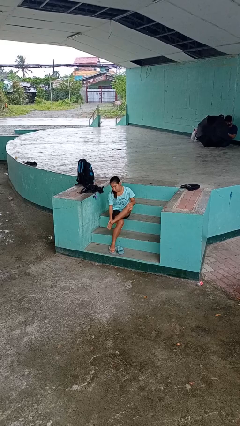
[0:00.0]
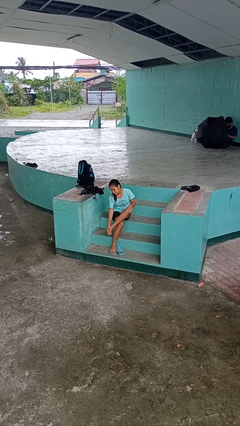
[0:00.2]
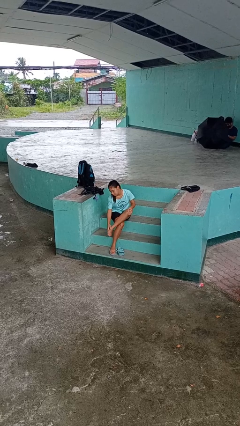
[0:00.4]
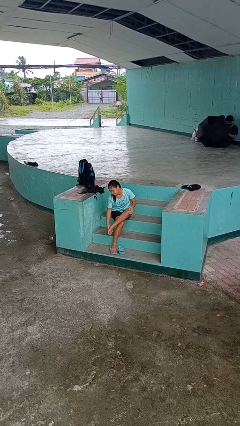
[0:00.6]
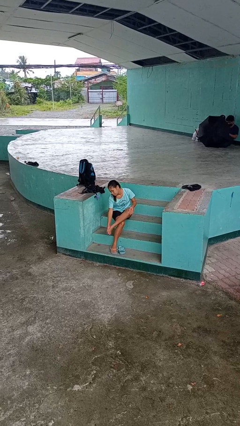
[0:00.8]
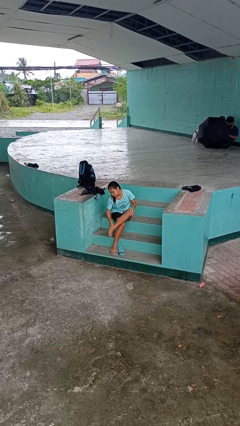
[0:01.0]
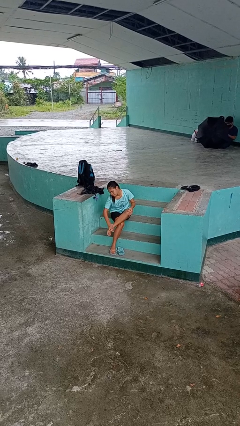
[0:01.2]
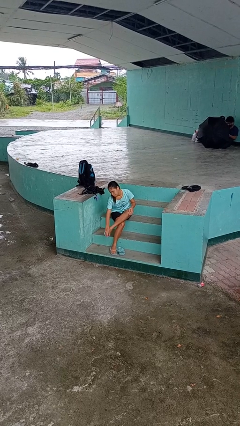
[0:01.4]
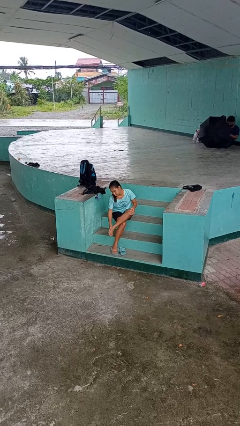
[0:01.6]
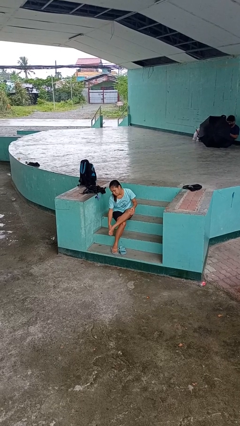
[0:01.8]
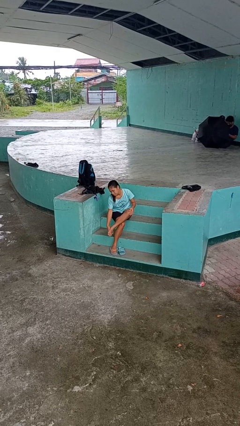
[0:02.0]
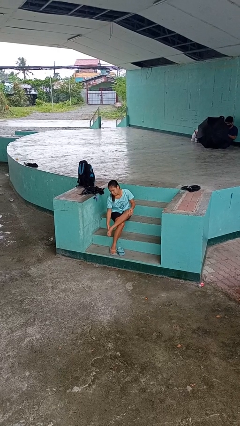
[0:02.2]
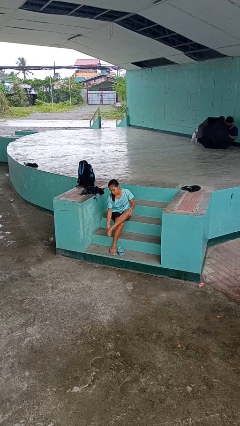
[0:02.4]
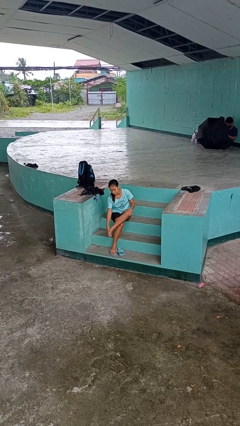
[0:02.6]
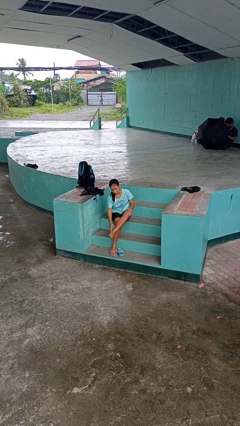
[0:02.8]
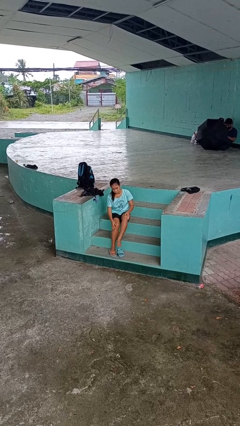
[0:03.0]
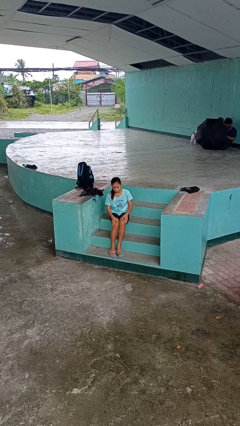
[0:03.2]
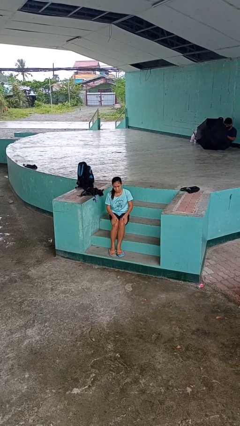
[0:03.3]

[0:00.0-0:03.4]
person rubs foot

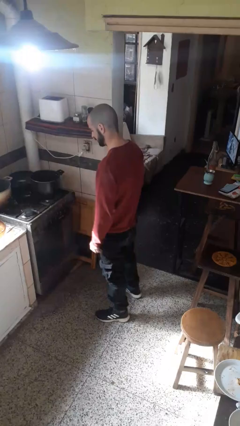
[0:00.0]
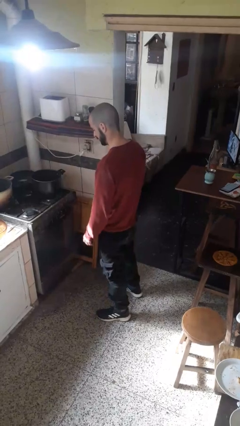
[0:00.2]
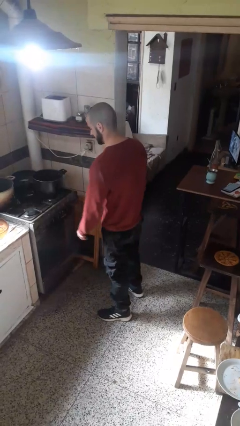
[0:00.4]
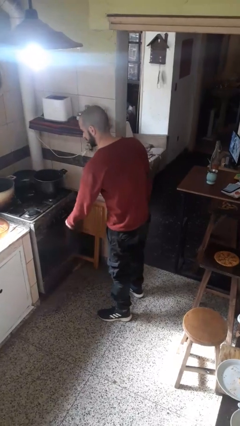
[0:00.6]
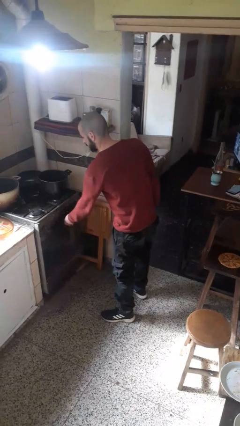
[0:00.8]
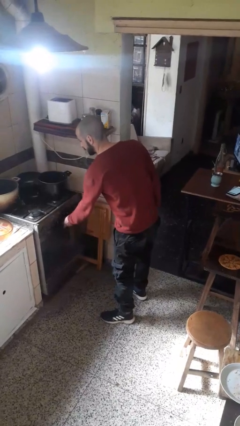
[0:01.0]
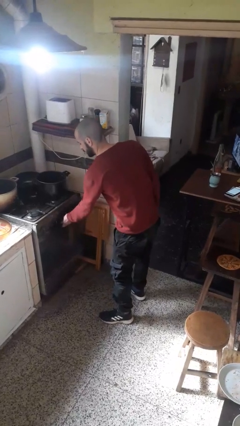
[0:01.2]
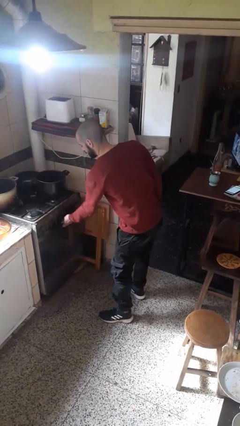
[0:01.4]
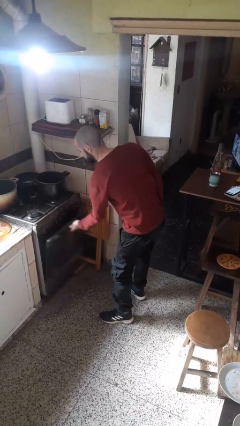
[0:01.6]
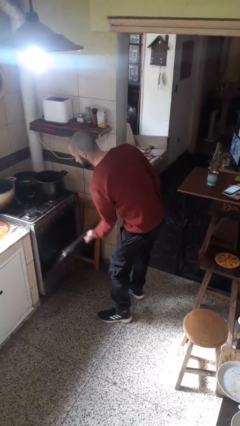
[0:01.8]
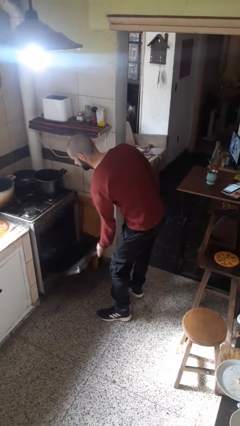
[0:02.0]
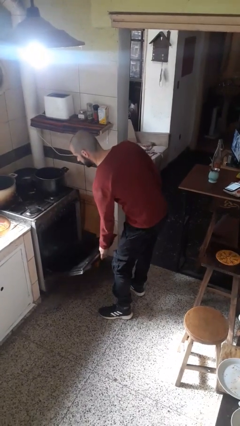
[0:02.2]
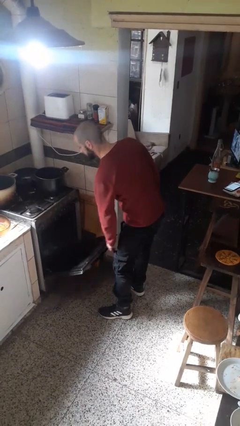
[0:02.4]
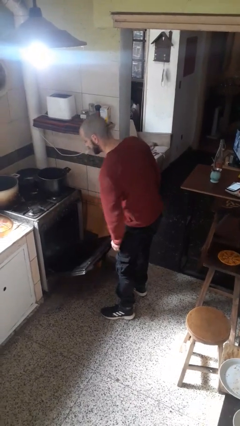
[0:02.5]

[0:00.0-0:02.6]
person opens oven door

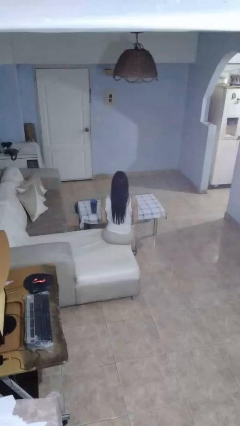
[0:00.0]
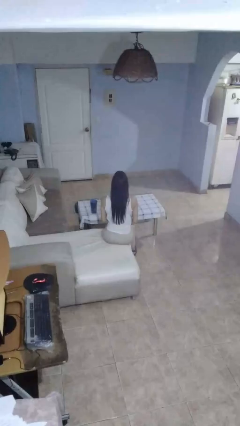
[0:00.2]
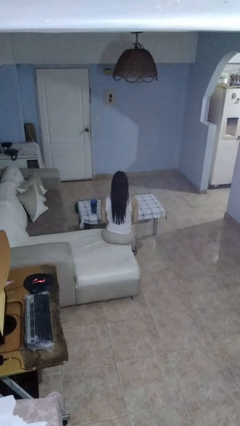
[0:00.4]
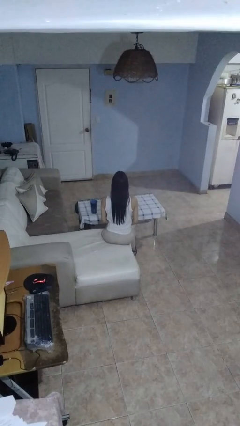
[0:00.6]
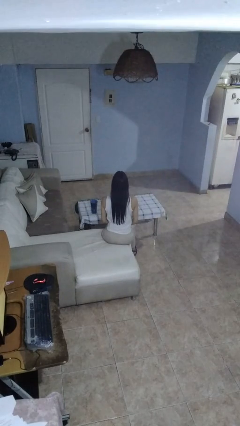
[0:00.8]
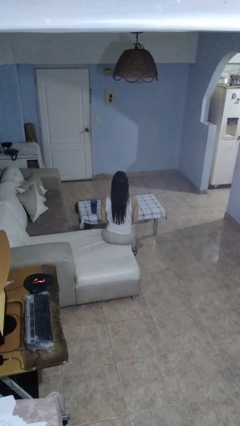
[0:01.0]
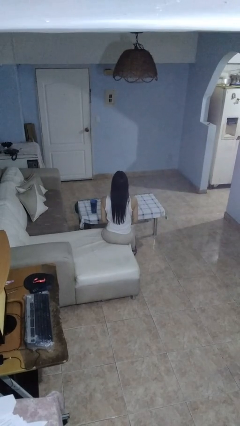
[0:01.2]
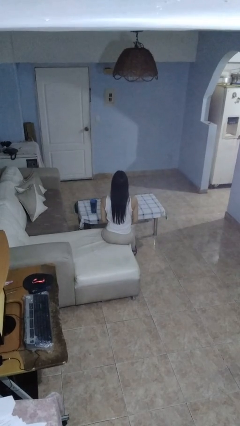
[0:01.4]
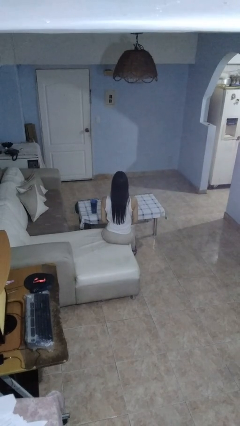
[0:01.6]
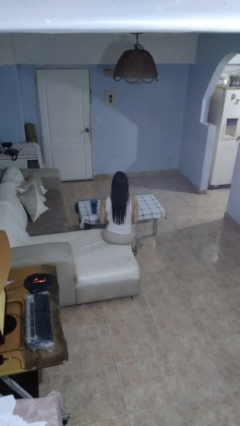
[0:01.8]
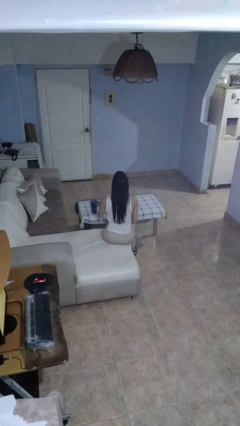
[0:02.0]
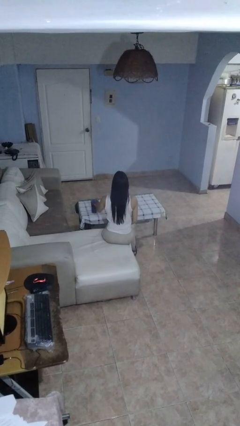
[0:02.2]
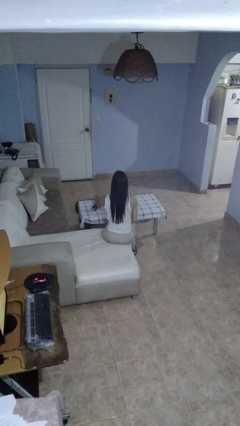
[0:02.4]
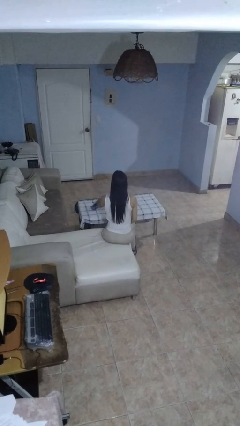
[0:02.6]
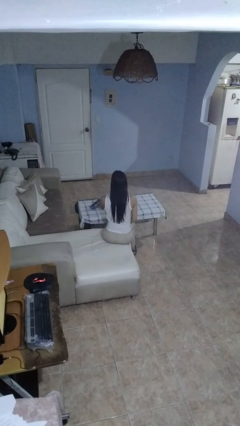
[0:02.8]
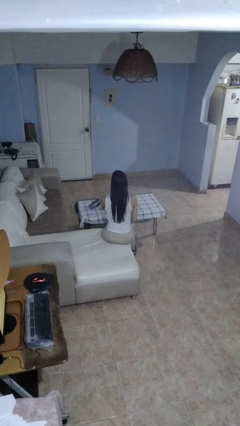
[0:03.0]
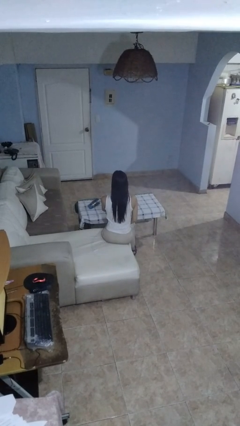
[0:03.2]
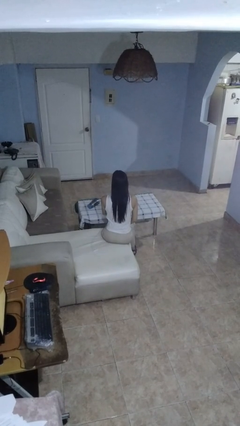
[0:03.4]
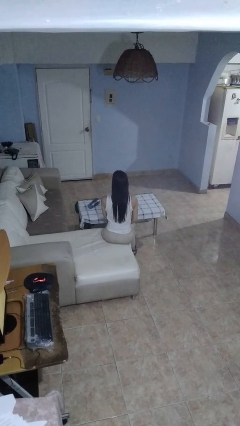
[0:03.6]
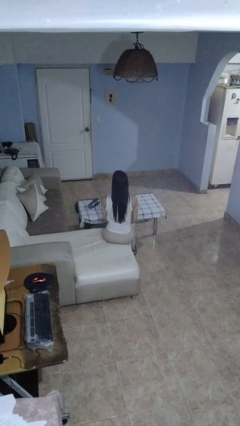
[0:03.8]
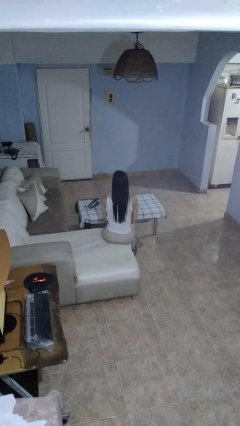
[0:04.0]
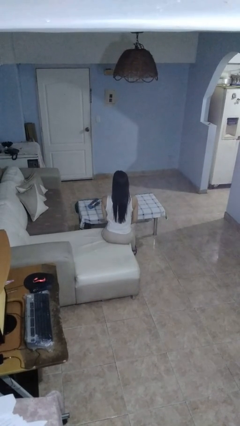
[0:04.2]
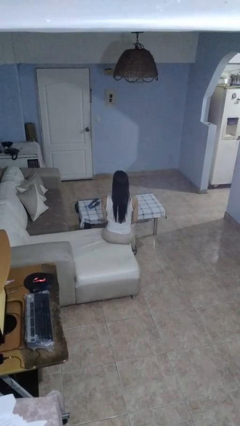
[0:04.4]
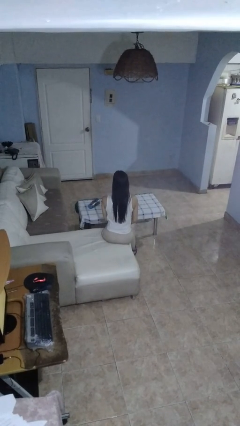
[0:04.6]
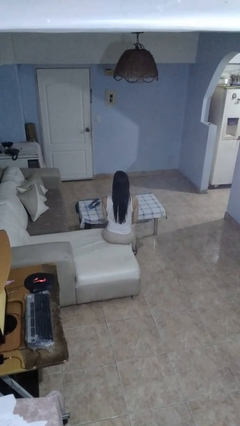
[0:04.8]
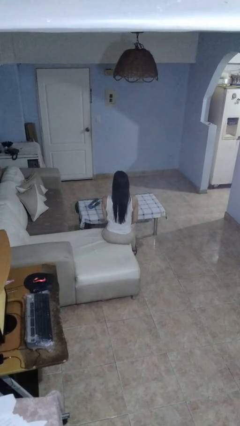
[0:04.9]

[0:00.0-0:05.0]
person knocks over glass

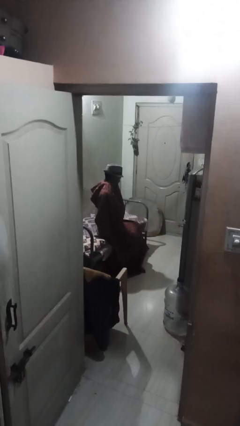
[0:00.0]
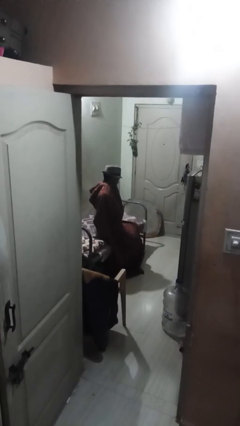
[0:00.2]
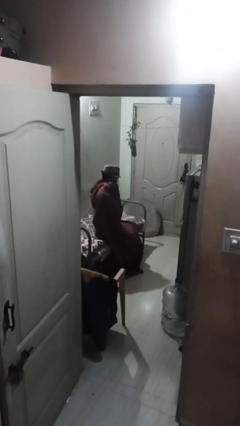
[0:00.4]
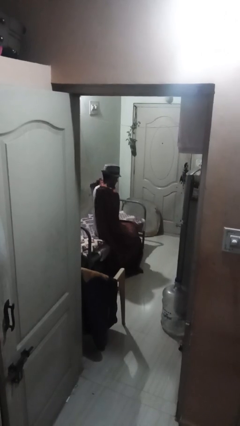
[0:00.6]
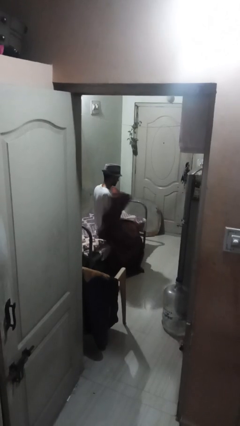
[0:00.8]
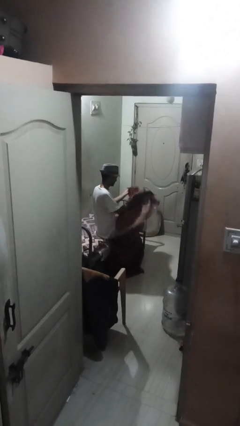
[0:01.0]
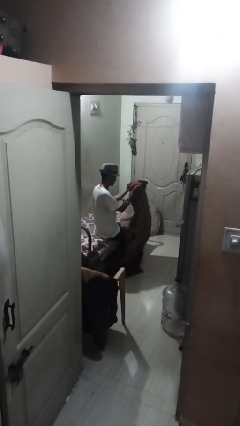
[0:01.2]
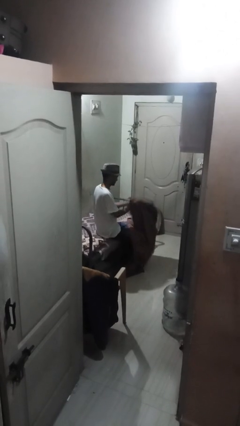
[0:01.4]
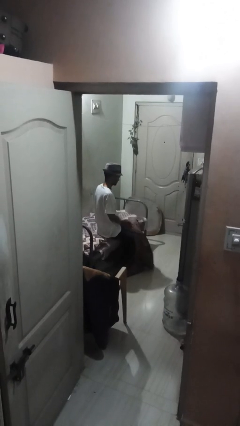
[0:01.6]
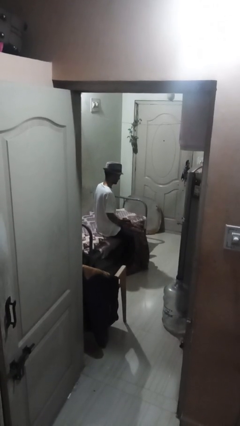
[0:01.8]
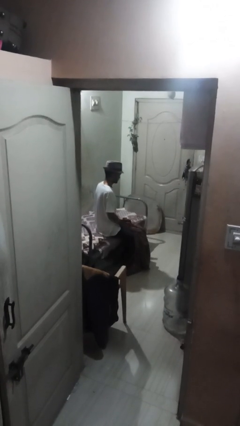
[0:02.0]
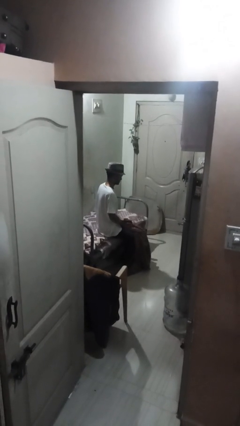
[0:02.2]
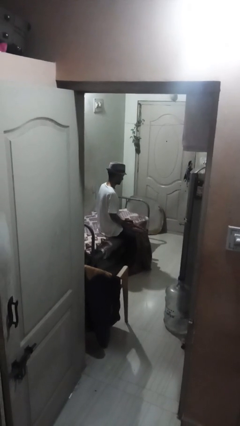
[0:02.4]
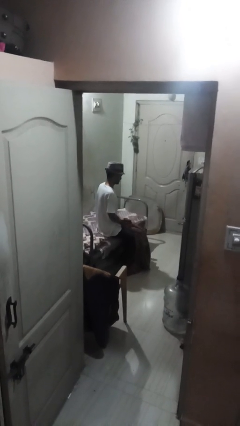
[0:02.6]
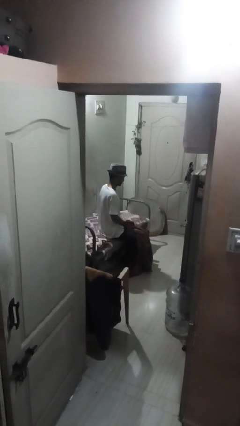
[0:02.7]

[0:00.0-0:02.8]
person uncovers with blanket

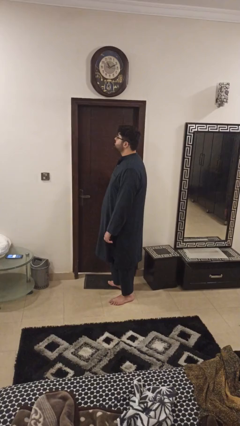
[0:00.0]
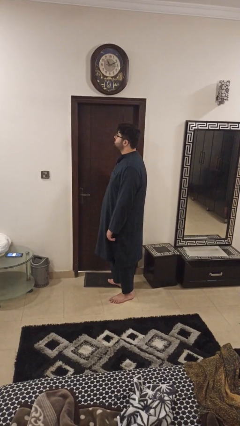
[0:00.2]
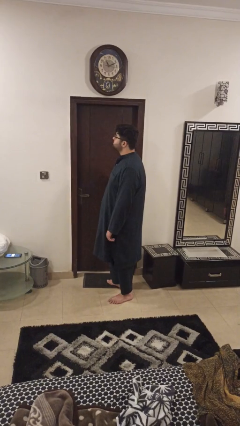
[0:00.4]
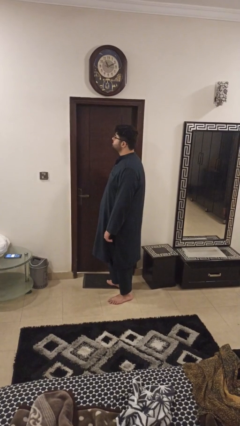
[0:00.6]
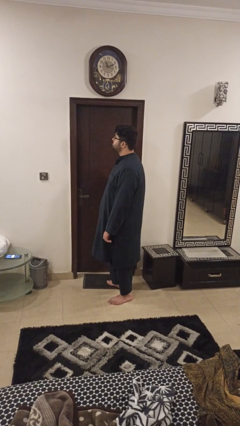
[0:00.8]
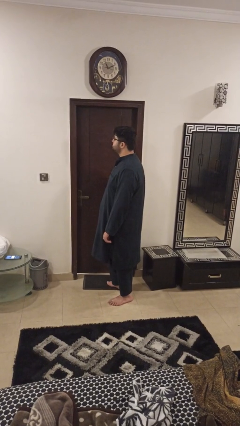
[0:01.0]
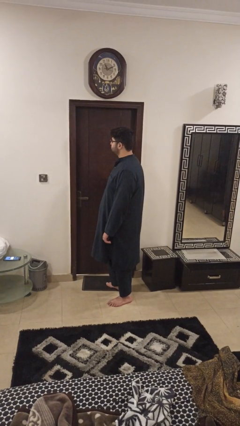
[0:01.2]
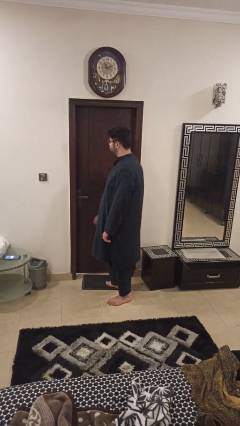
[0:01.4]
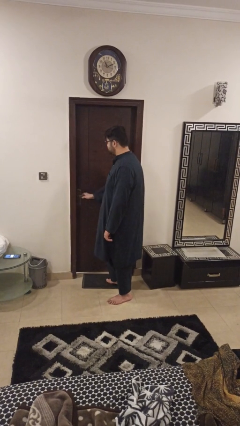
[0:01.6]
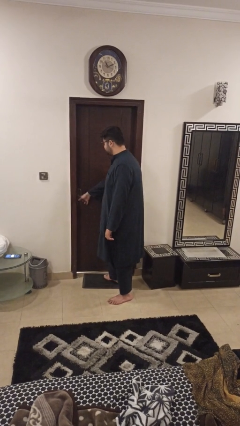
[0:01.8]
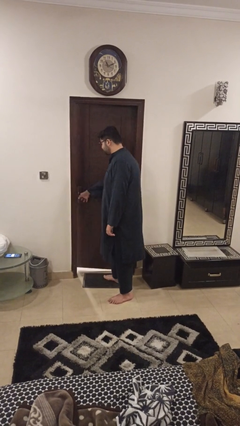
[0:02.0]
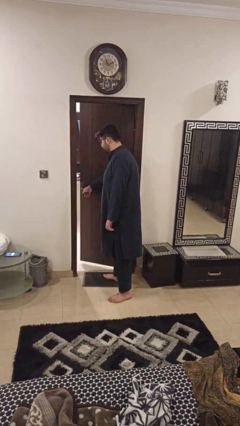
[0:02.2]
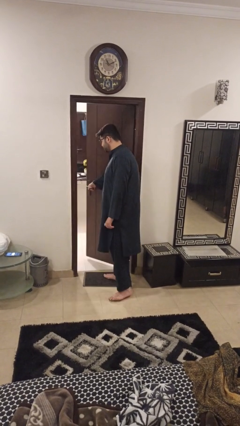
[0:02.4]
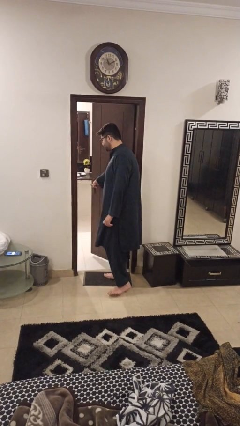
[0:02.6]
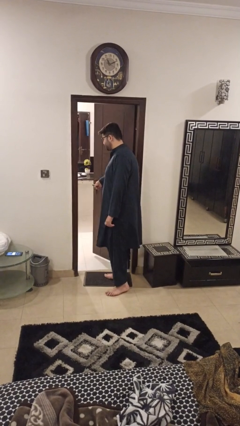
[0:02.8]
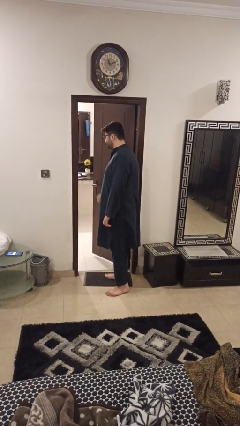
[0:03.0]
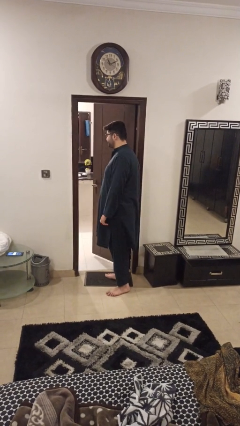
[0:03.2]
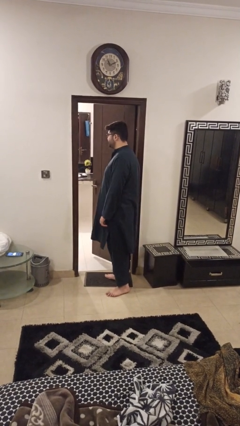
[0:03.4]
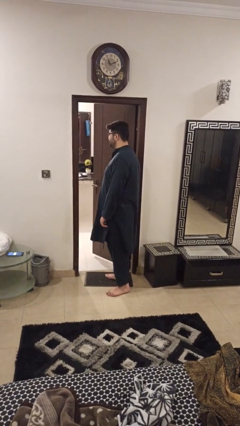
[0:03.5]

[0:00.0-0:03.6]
person opens facility door

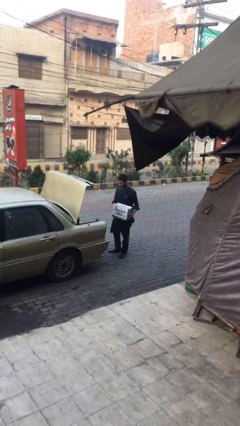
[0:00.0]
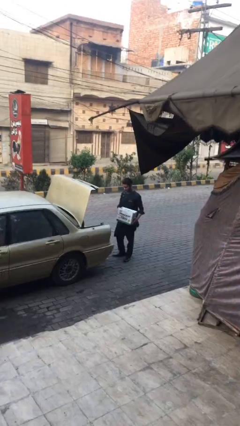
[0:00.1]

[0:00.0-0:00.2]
person loads car
